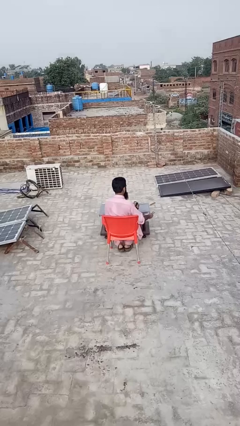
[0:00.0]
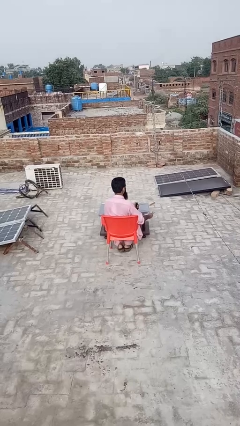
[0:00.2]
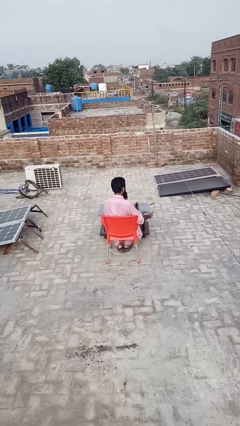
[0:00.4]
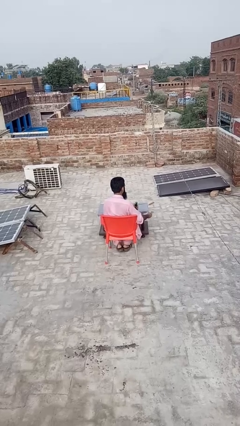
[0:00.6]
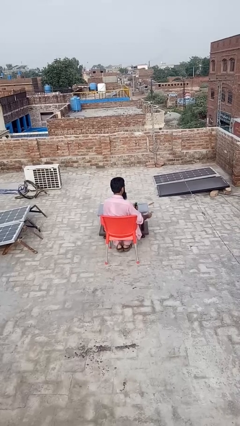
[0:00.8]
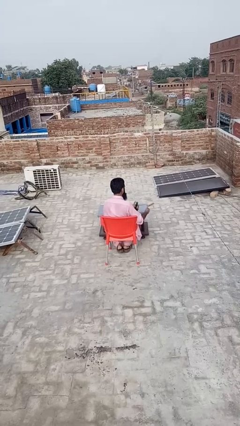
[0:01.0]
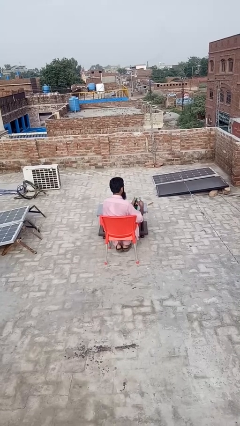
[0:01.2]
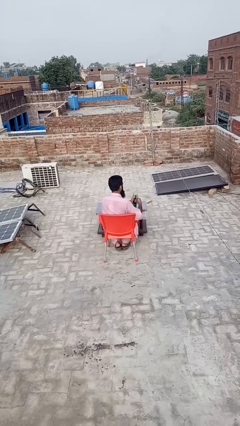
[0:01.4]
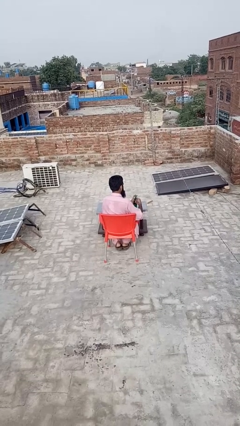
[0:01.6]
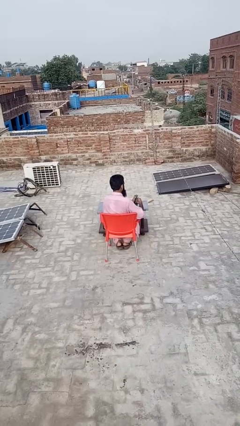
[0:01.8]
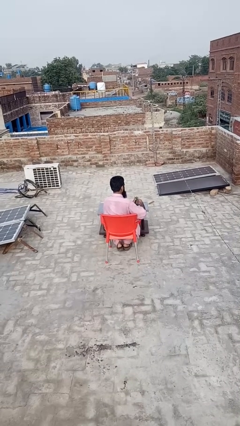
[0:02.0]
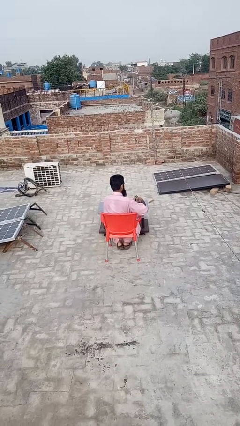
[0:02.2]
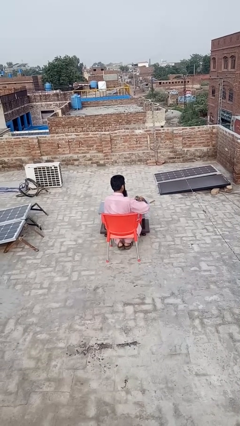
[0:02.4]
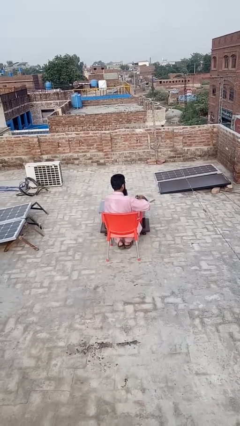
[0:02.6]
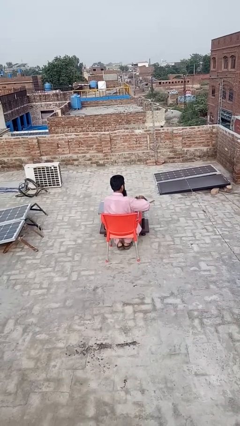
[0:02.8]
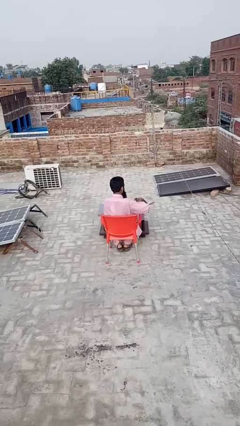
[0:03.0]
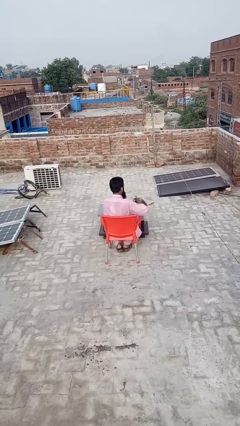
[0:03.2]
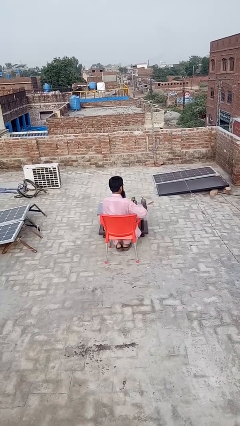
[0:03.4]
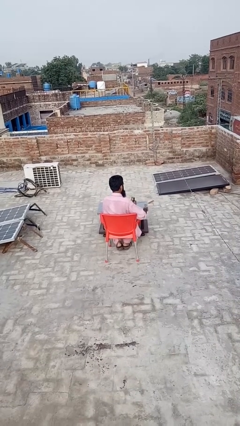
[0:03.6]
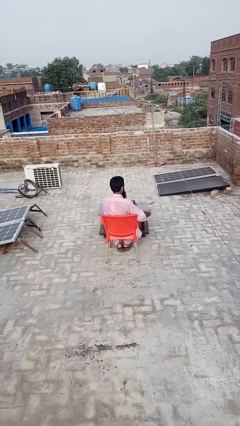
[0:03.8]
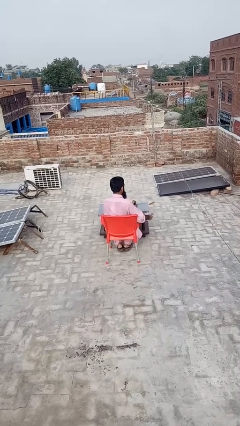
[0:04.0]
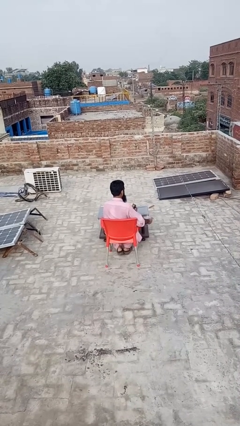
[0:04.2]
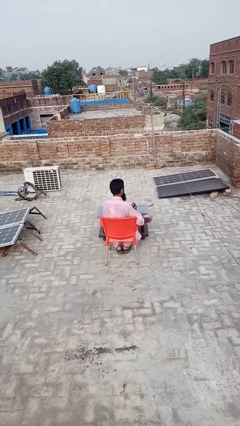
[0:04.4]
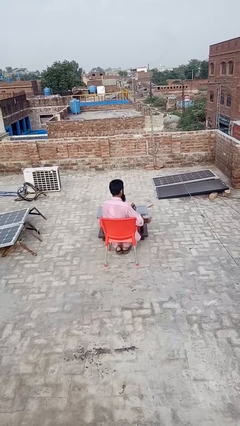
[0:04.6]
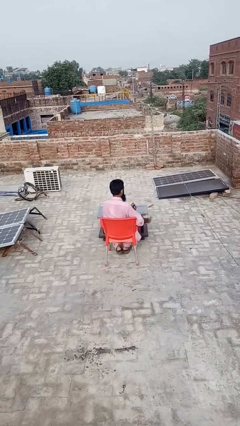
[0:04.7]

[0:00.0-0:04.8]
person opens can with can opener

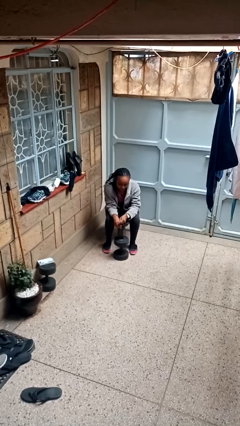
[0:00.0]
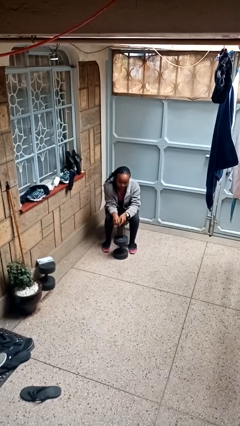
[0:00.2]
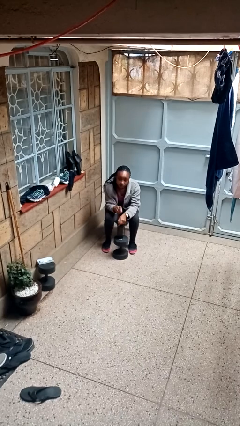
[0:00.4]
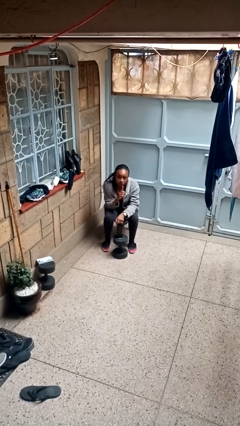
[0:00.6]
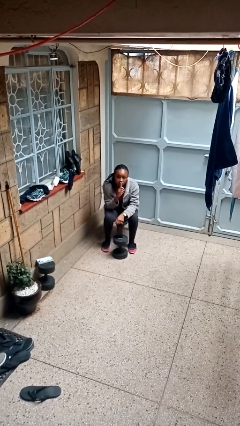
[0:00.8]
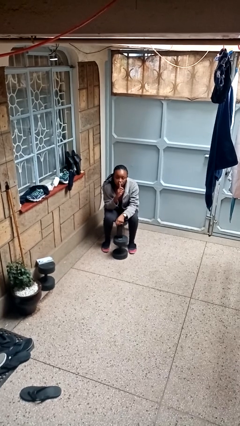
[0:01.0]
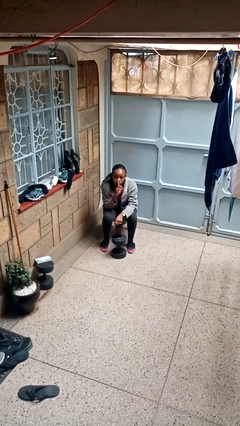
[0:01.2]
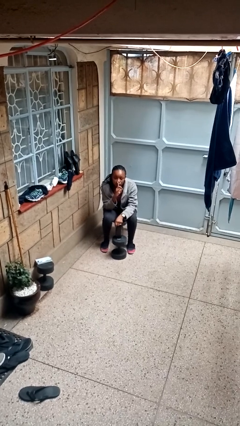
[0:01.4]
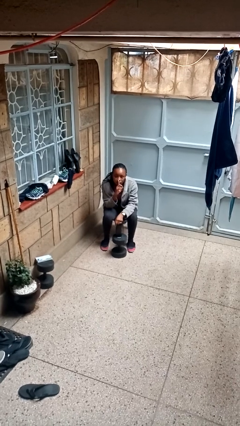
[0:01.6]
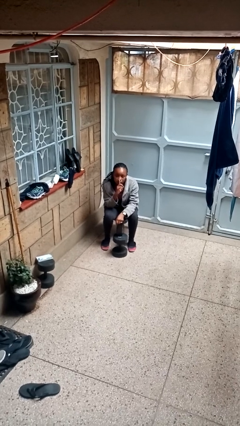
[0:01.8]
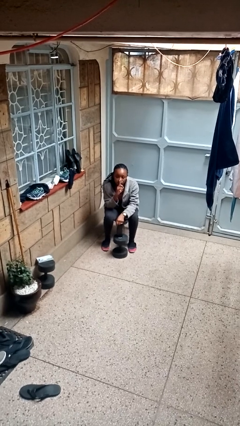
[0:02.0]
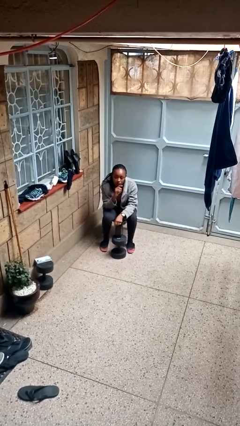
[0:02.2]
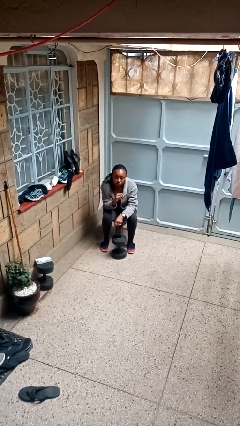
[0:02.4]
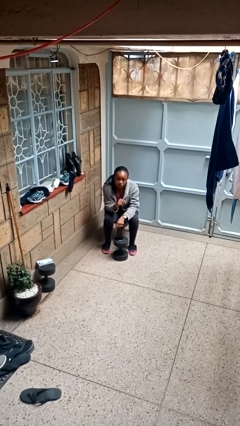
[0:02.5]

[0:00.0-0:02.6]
person gestures be quiet

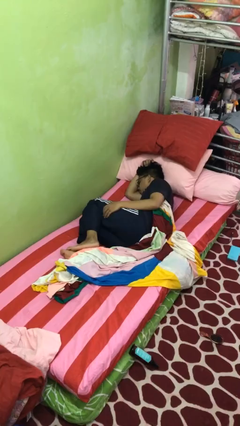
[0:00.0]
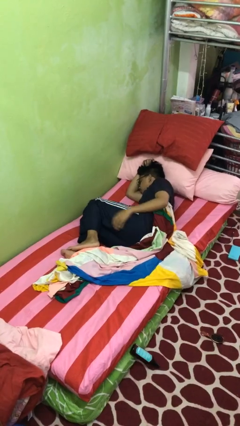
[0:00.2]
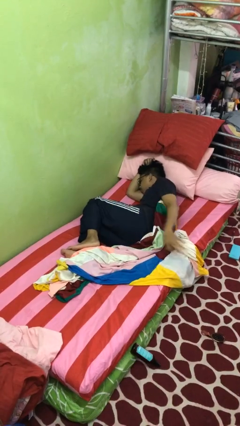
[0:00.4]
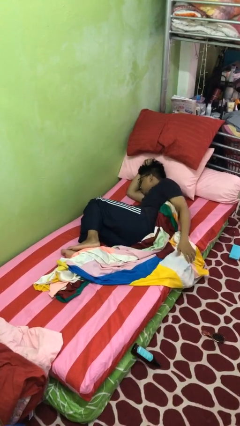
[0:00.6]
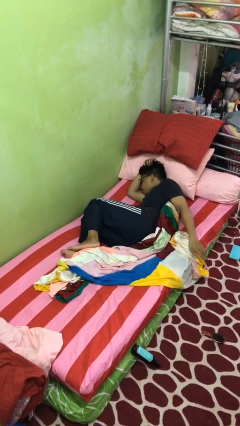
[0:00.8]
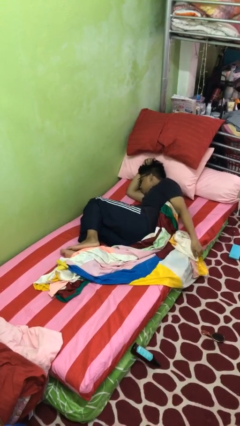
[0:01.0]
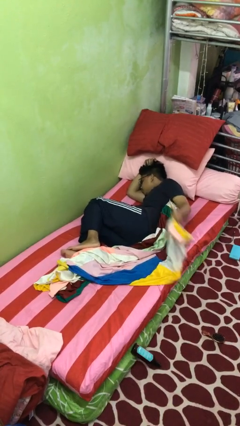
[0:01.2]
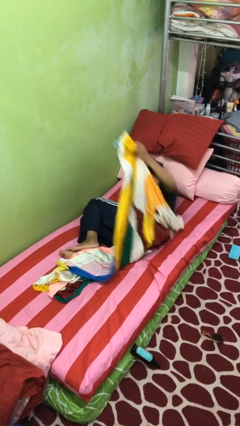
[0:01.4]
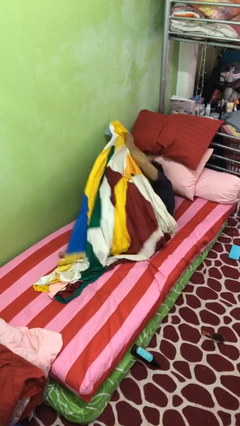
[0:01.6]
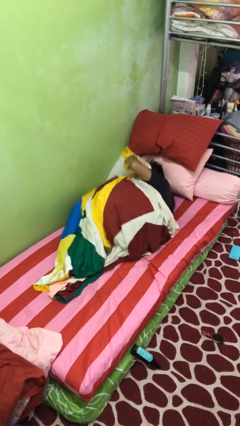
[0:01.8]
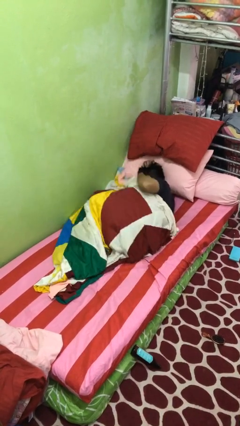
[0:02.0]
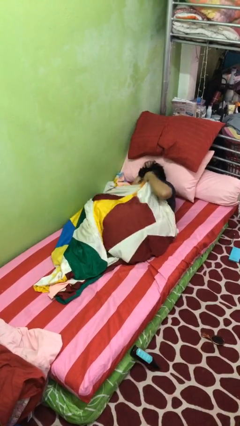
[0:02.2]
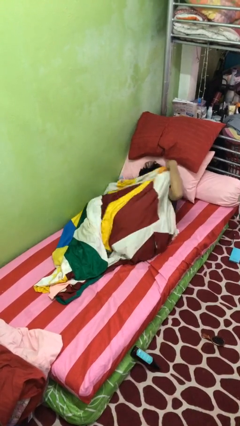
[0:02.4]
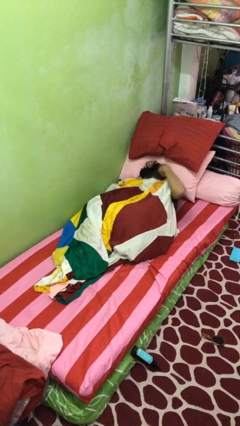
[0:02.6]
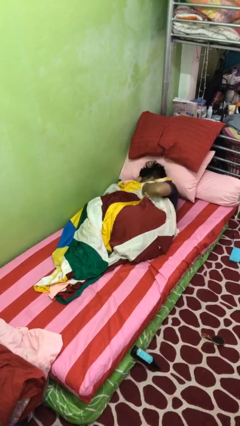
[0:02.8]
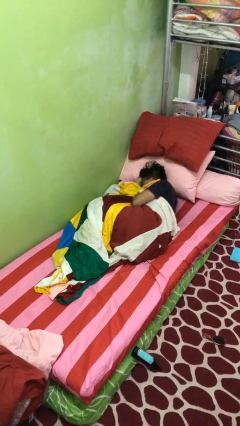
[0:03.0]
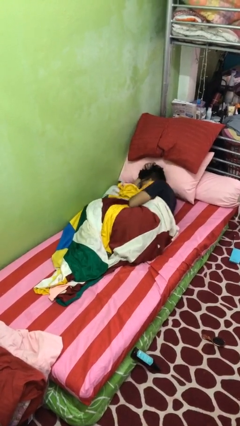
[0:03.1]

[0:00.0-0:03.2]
person covers with blanket

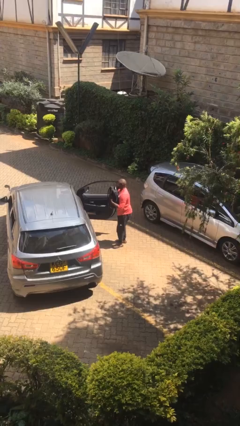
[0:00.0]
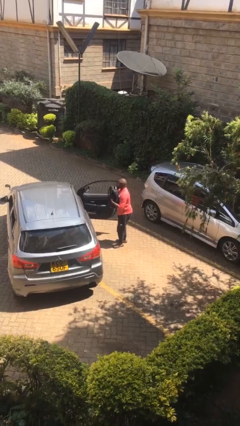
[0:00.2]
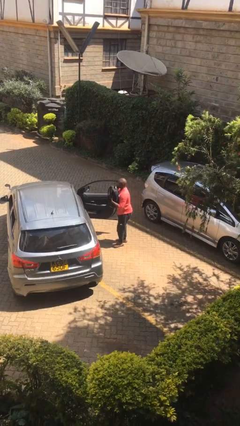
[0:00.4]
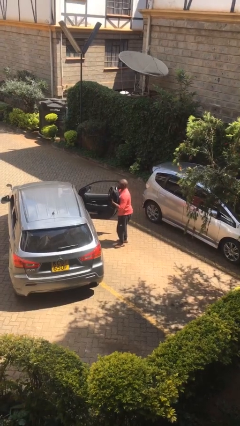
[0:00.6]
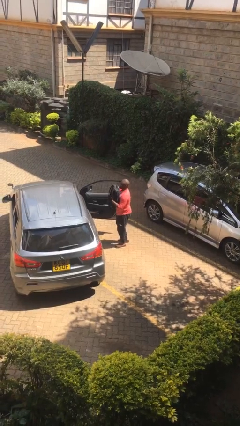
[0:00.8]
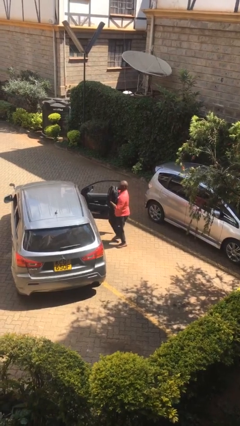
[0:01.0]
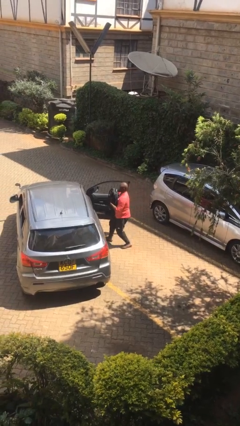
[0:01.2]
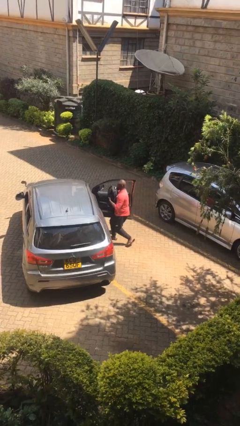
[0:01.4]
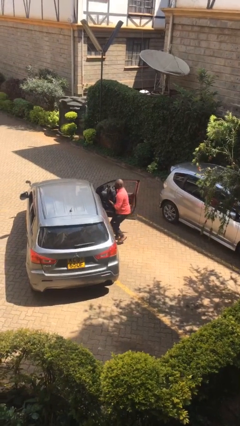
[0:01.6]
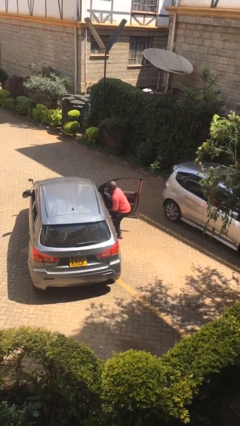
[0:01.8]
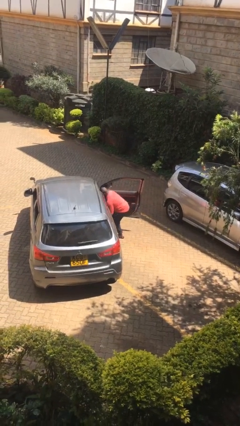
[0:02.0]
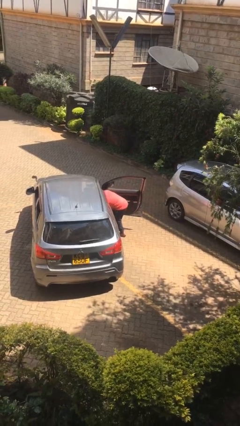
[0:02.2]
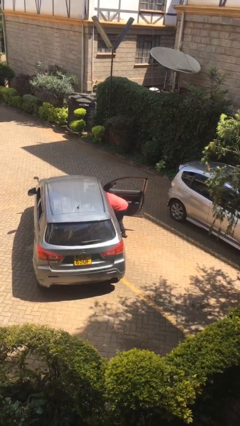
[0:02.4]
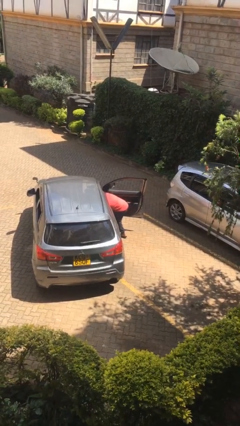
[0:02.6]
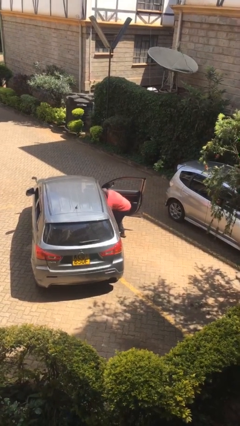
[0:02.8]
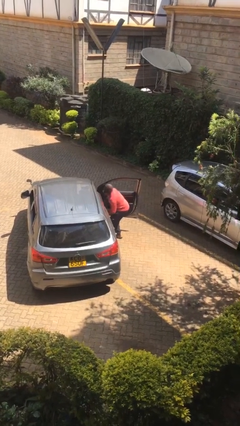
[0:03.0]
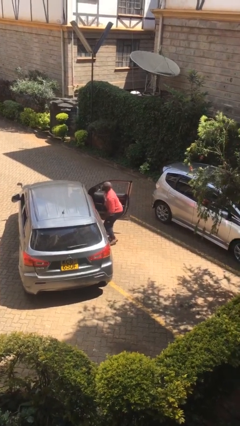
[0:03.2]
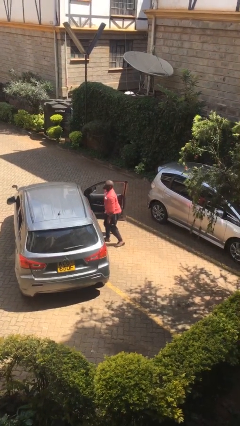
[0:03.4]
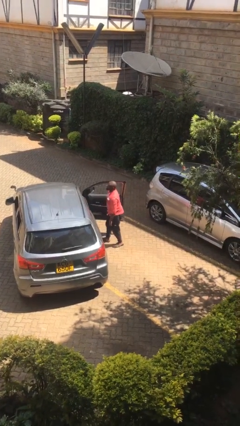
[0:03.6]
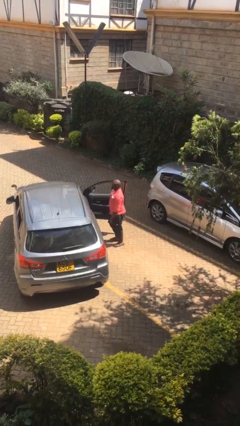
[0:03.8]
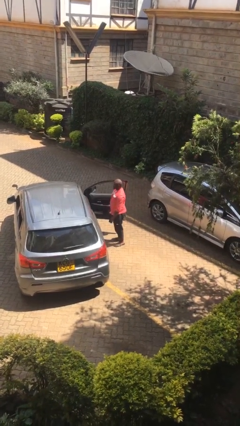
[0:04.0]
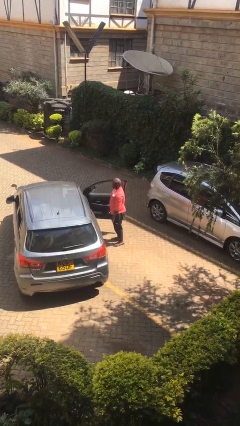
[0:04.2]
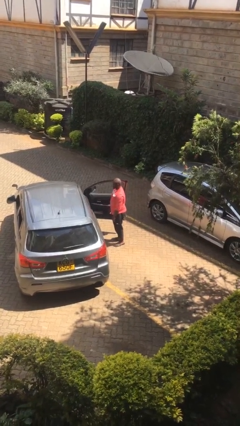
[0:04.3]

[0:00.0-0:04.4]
person loads car

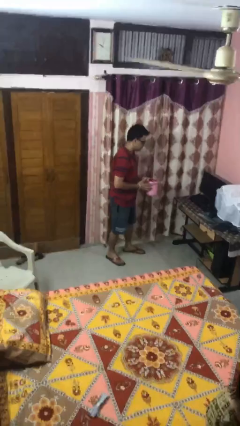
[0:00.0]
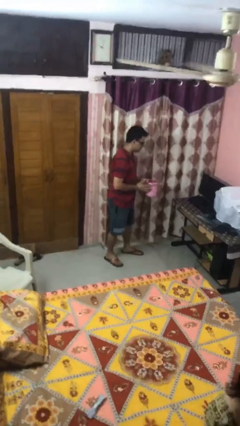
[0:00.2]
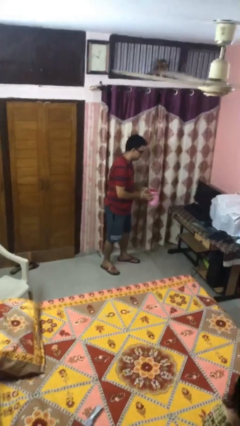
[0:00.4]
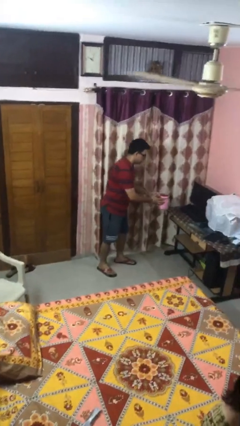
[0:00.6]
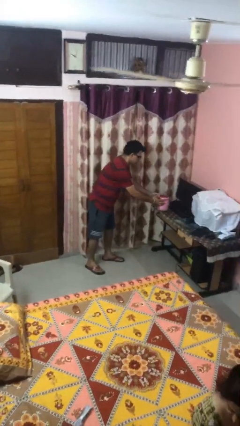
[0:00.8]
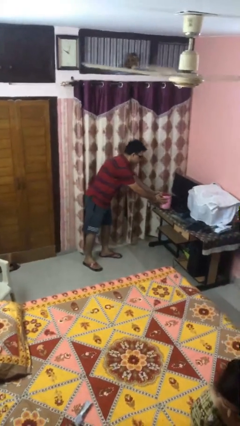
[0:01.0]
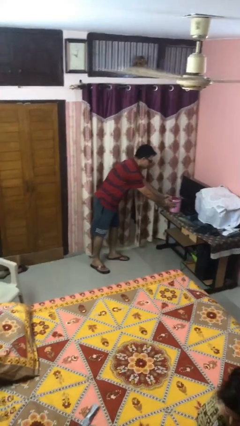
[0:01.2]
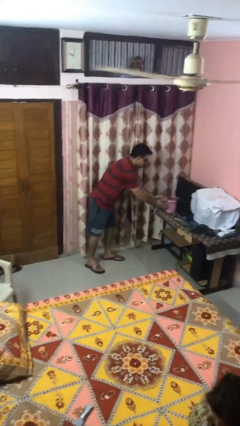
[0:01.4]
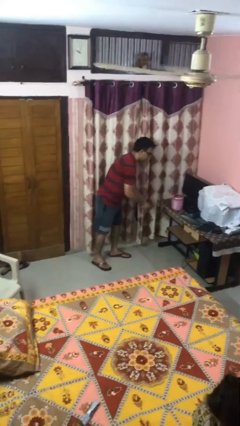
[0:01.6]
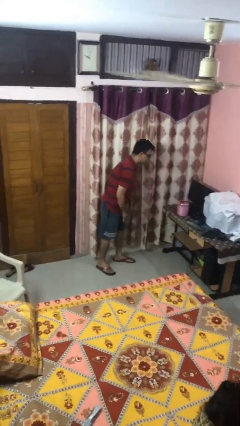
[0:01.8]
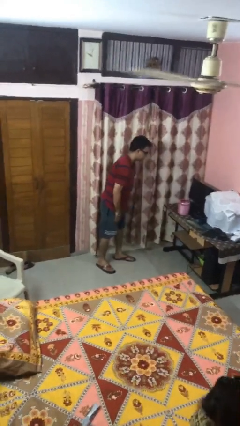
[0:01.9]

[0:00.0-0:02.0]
person puts down object on countertop

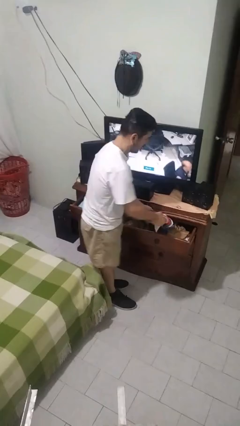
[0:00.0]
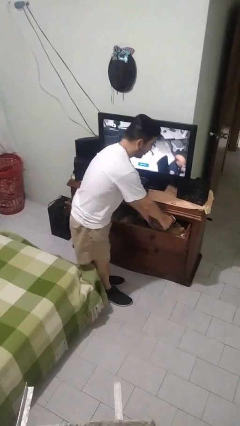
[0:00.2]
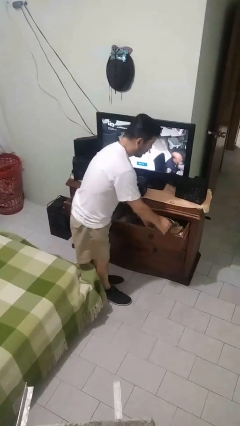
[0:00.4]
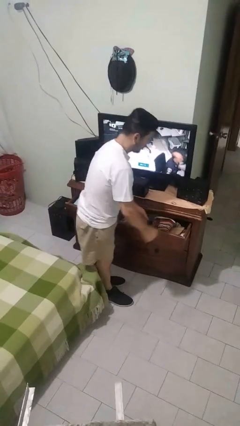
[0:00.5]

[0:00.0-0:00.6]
person puts clothes into dresser
